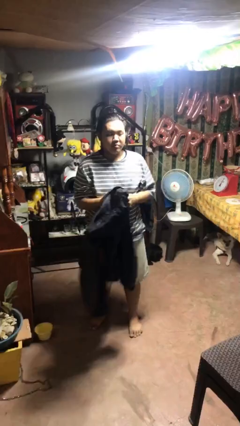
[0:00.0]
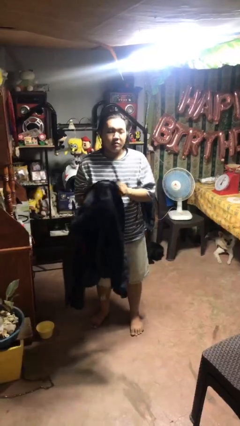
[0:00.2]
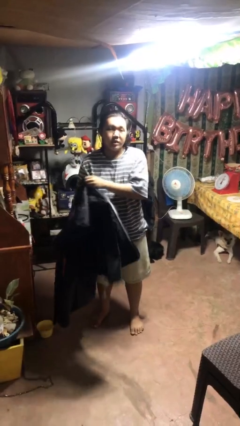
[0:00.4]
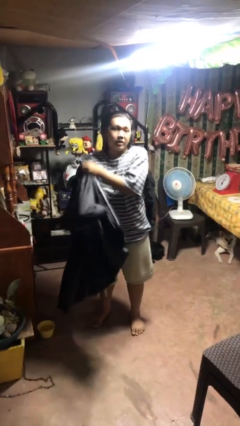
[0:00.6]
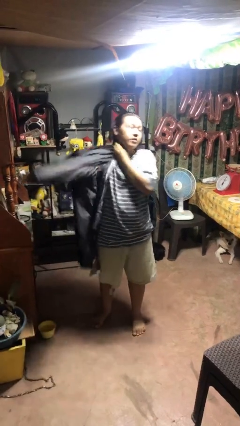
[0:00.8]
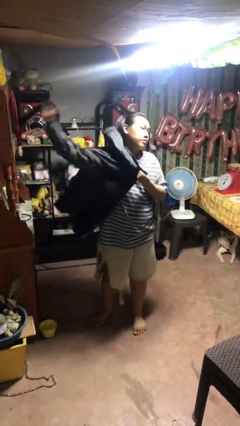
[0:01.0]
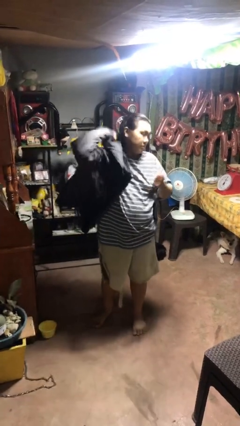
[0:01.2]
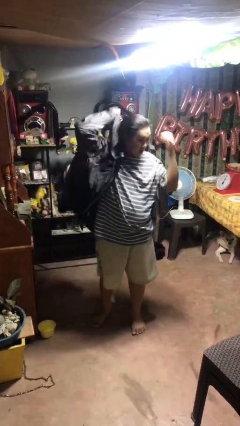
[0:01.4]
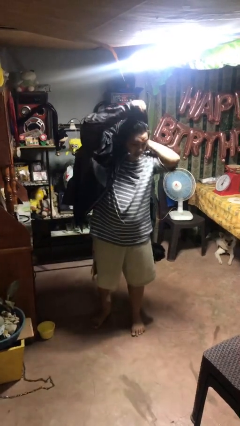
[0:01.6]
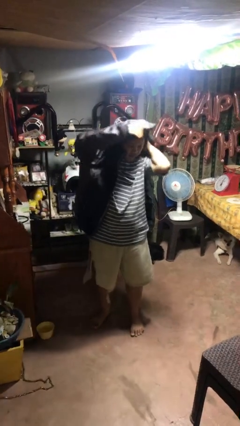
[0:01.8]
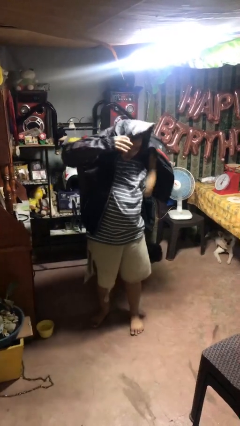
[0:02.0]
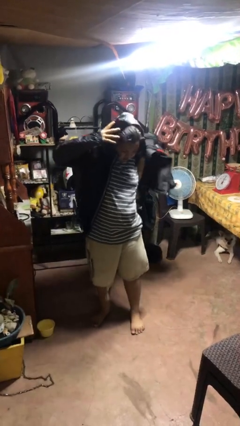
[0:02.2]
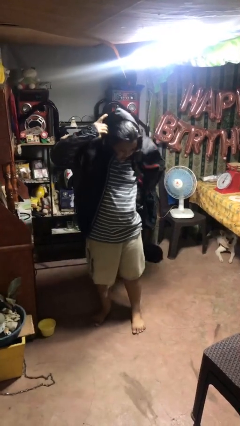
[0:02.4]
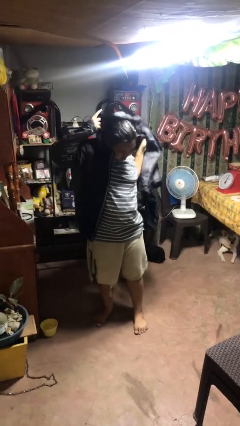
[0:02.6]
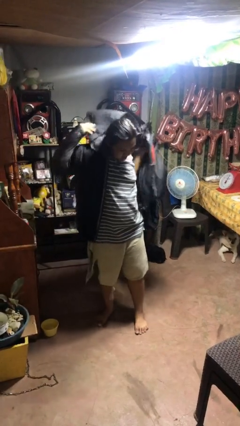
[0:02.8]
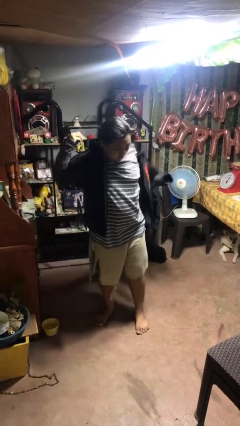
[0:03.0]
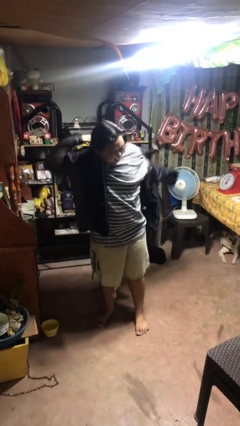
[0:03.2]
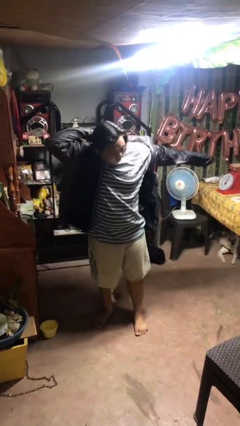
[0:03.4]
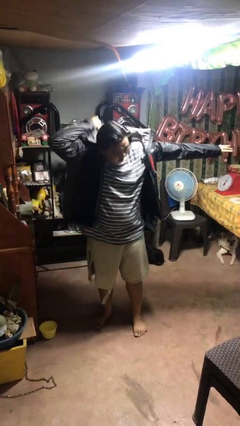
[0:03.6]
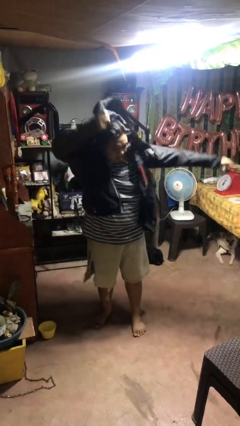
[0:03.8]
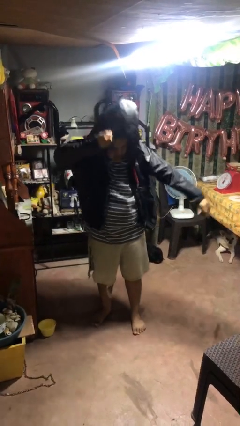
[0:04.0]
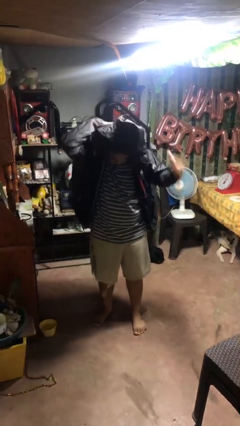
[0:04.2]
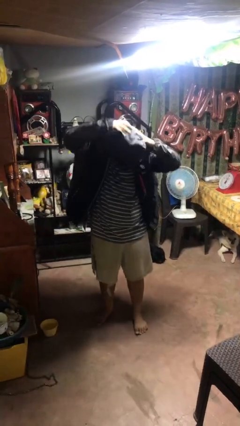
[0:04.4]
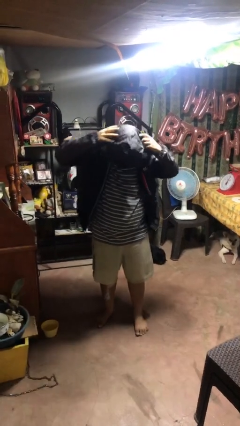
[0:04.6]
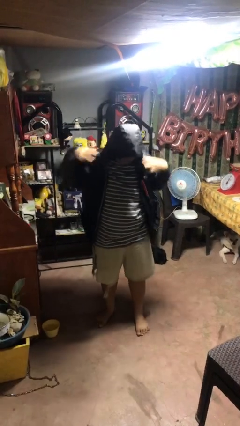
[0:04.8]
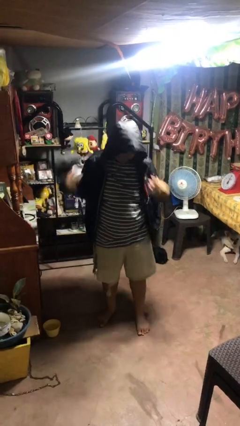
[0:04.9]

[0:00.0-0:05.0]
person puts on hoodie

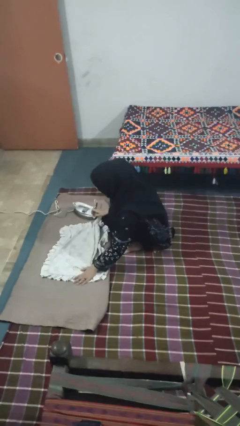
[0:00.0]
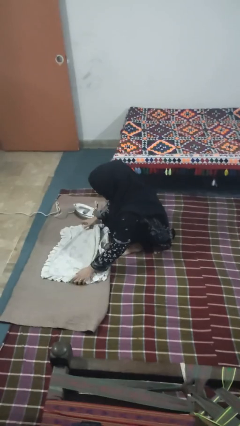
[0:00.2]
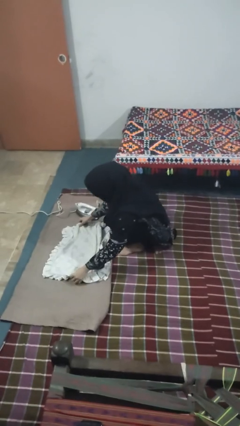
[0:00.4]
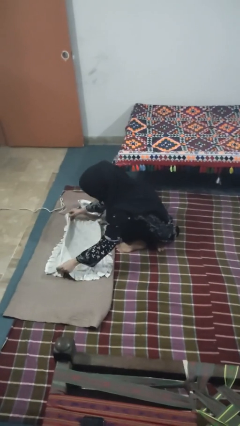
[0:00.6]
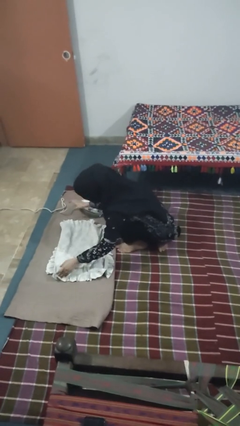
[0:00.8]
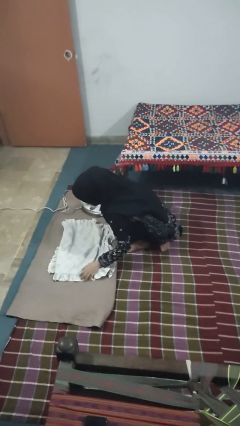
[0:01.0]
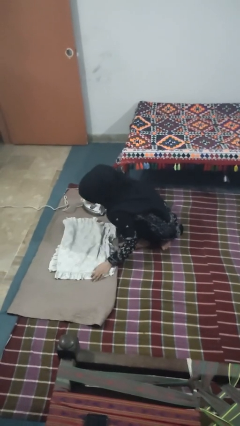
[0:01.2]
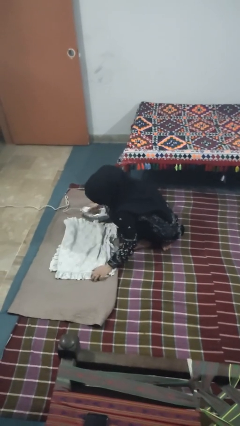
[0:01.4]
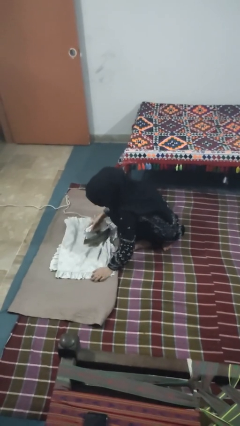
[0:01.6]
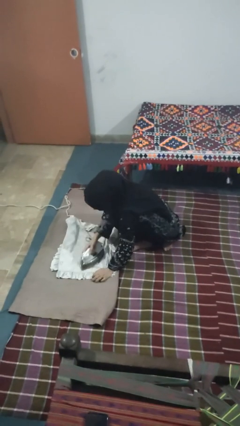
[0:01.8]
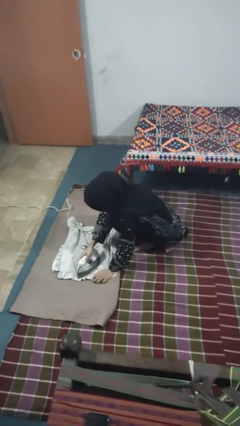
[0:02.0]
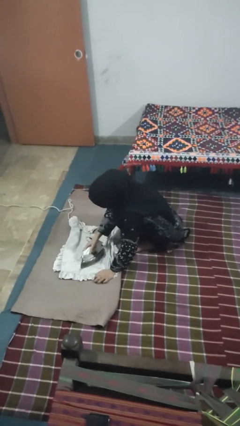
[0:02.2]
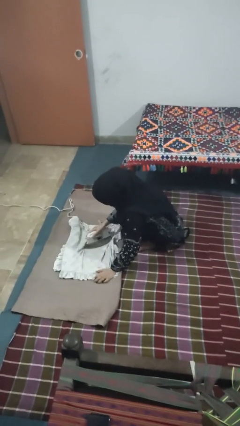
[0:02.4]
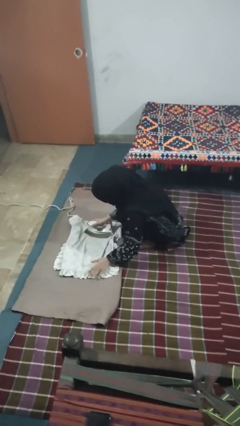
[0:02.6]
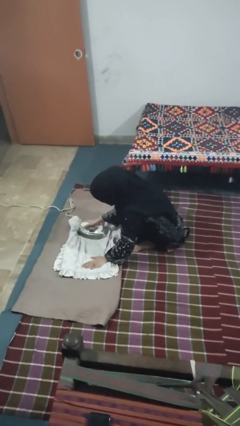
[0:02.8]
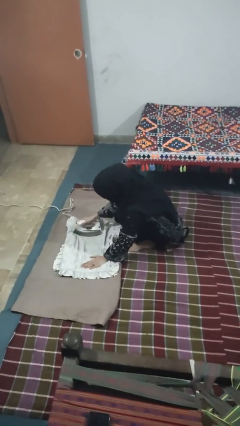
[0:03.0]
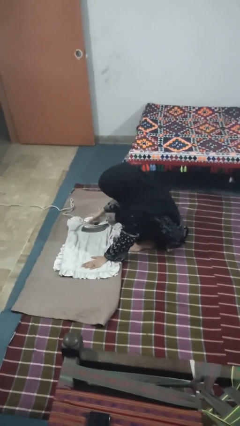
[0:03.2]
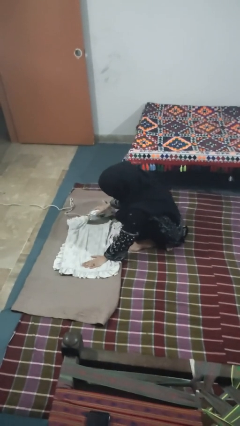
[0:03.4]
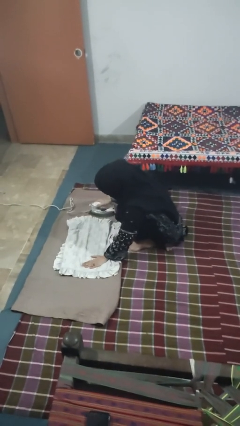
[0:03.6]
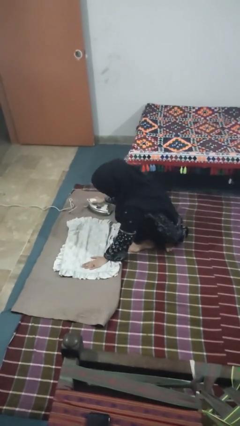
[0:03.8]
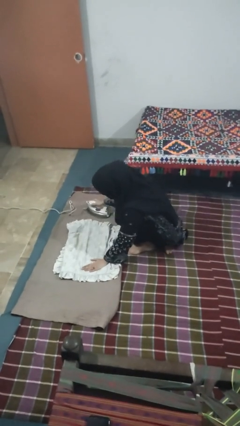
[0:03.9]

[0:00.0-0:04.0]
person irons clothes

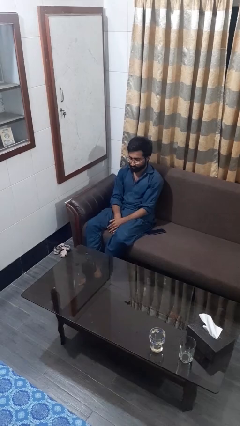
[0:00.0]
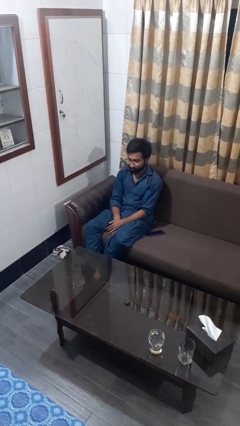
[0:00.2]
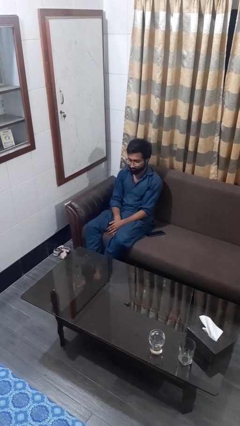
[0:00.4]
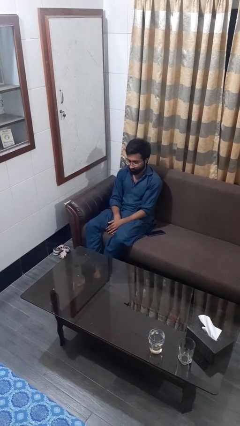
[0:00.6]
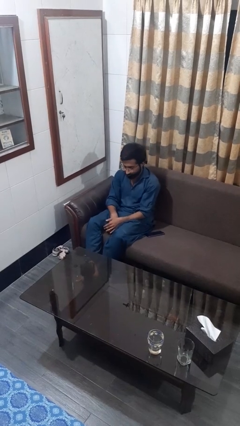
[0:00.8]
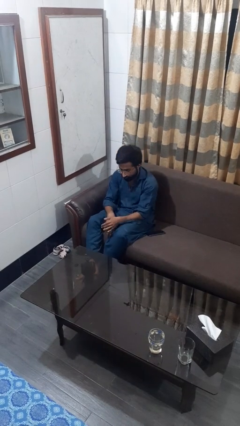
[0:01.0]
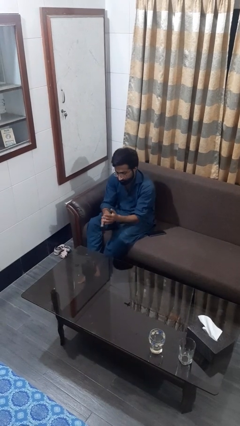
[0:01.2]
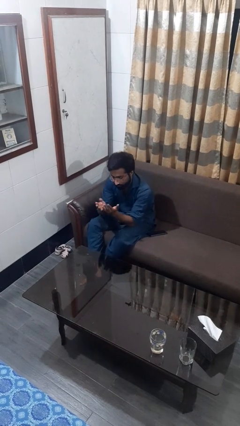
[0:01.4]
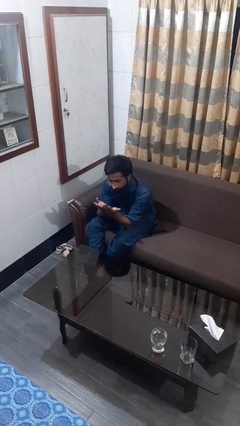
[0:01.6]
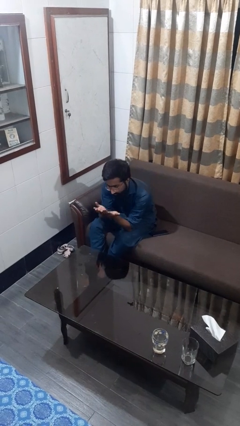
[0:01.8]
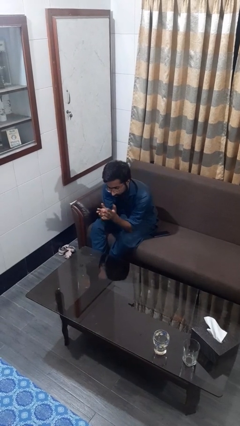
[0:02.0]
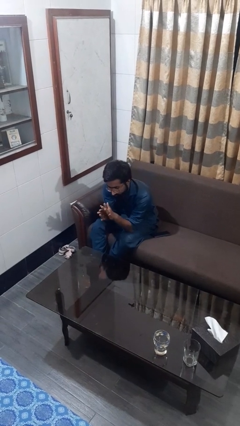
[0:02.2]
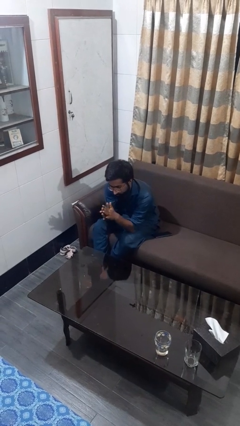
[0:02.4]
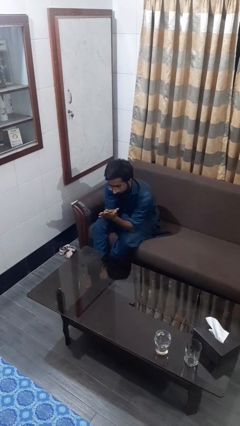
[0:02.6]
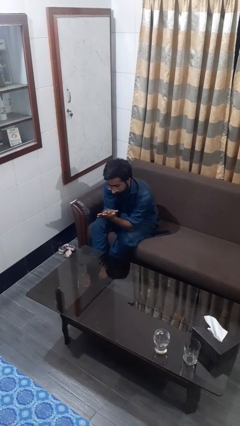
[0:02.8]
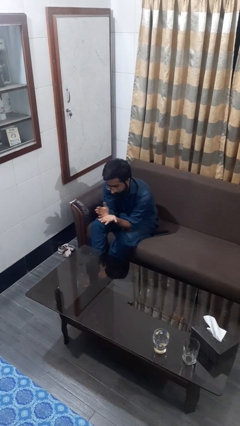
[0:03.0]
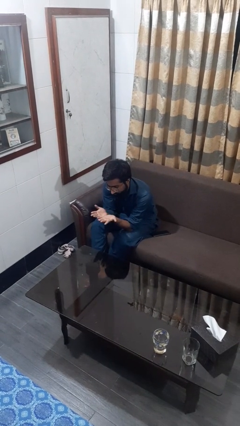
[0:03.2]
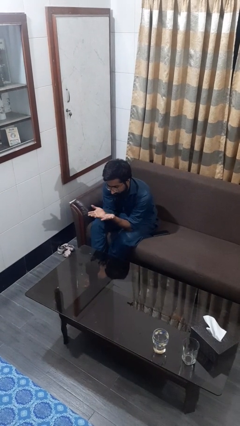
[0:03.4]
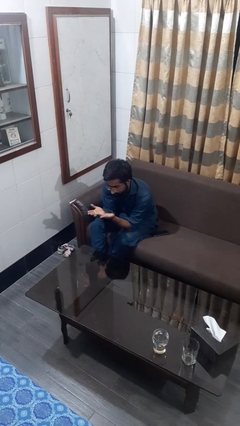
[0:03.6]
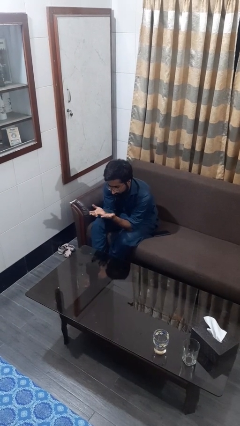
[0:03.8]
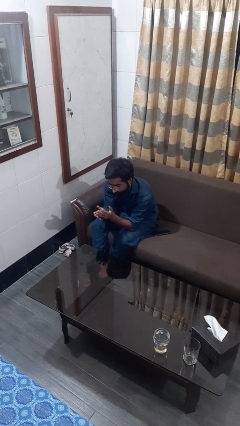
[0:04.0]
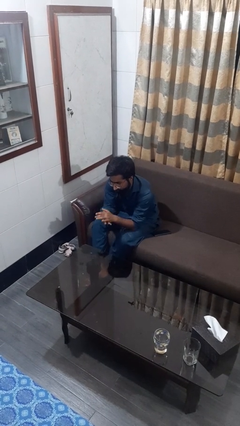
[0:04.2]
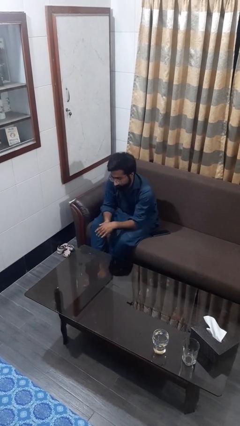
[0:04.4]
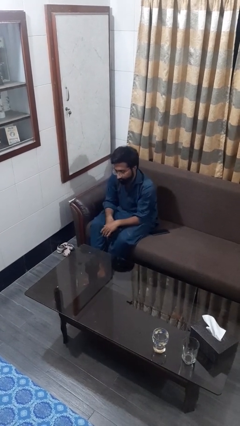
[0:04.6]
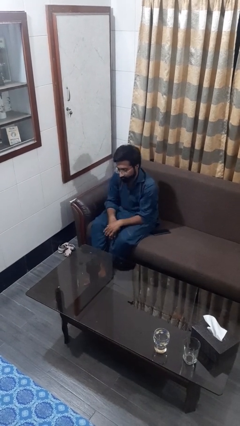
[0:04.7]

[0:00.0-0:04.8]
person looks at hands in lap

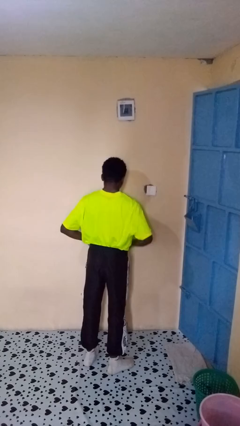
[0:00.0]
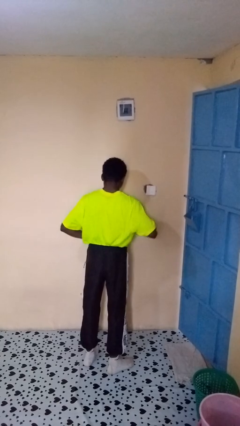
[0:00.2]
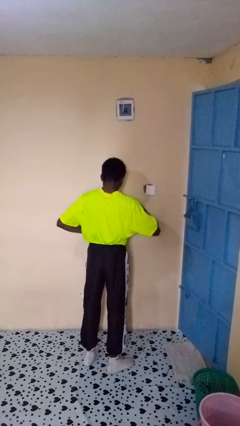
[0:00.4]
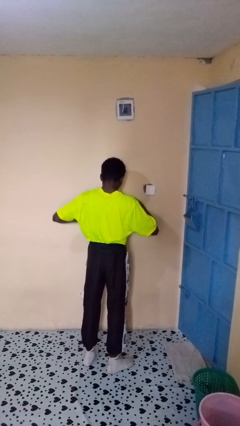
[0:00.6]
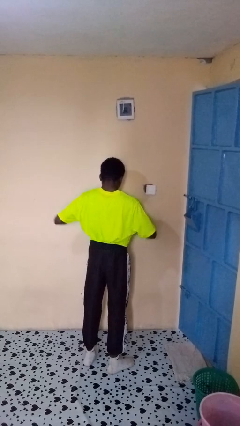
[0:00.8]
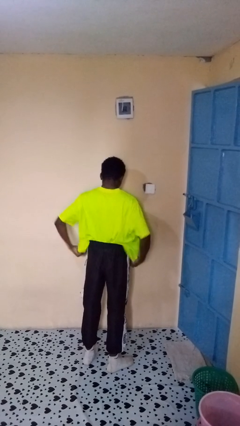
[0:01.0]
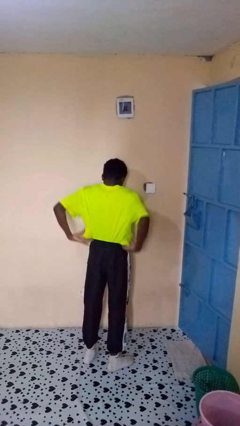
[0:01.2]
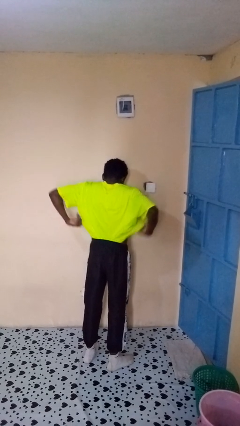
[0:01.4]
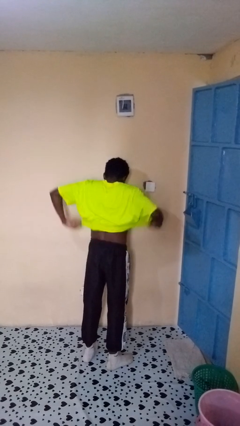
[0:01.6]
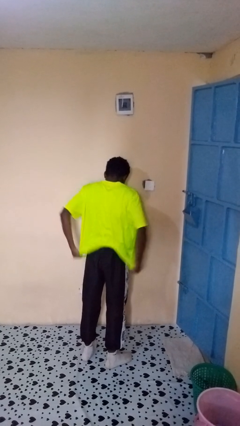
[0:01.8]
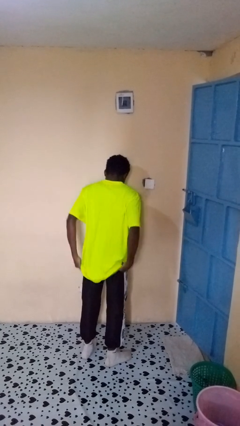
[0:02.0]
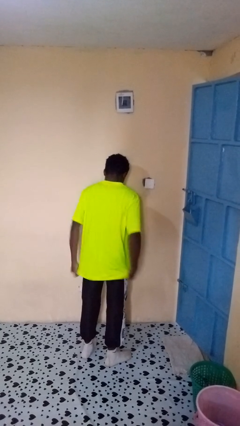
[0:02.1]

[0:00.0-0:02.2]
person untucks shirt

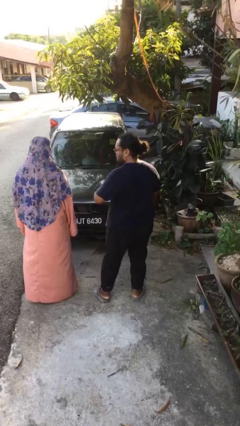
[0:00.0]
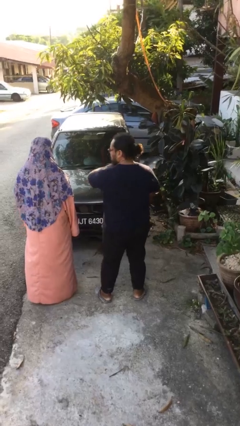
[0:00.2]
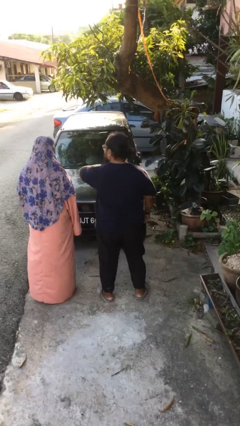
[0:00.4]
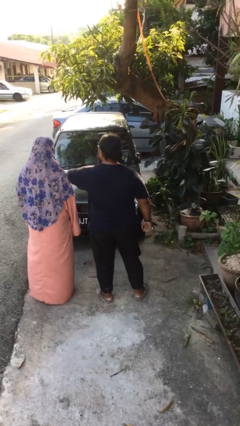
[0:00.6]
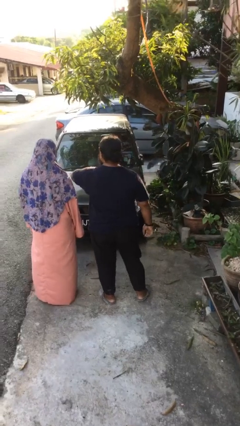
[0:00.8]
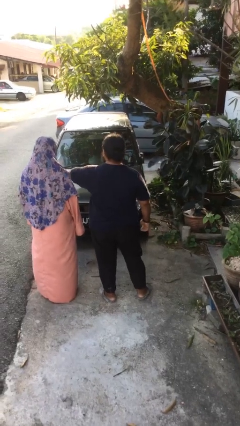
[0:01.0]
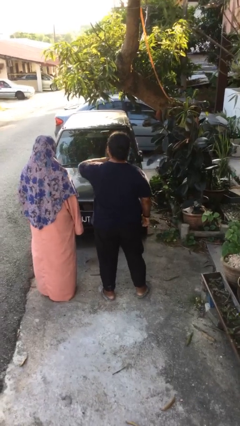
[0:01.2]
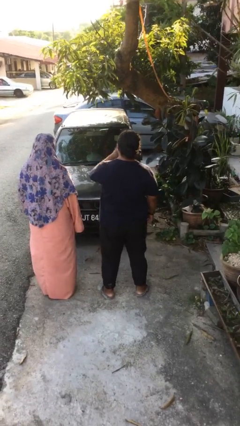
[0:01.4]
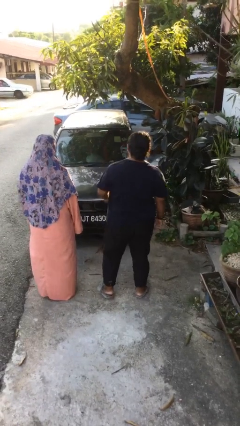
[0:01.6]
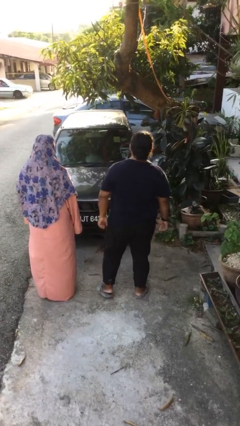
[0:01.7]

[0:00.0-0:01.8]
person nudges person with elbow
